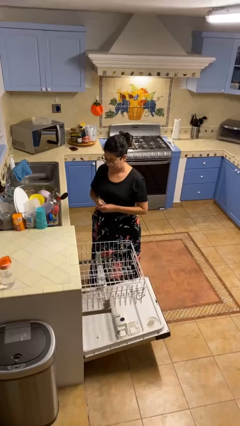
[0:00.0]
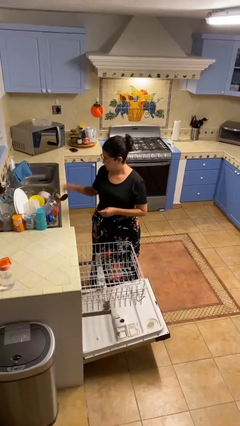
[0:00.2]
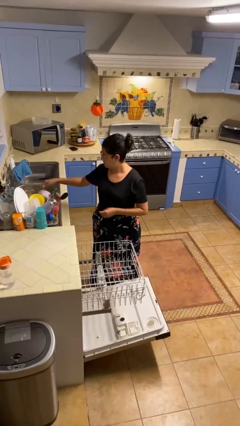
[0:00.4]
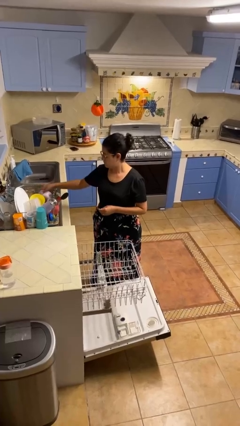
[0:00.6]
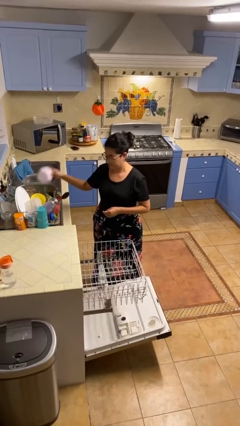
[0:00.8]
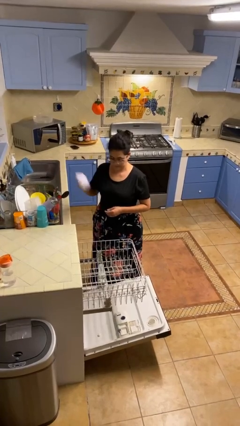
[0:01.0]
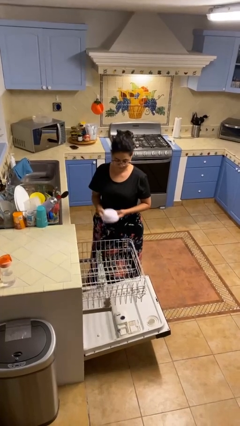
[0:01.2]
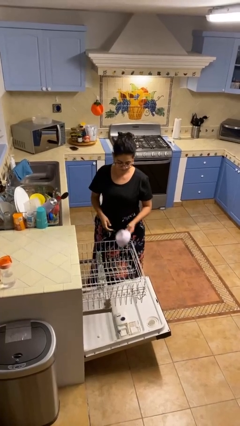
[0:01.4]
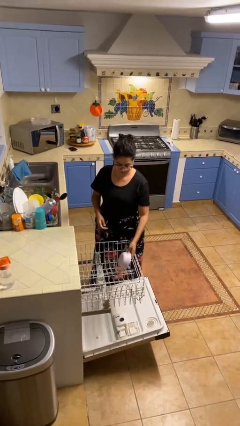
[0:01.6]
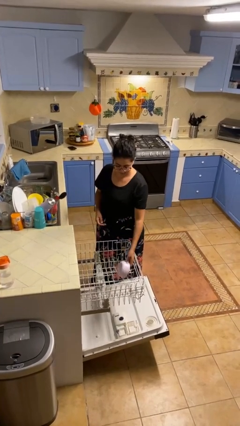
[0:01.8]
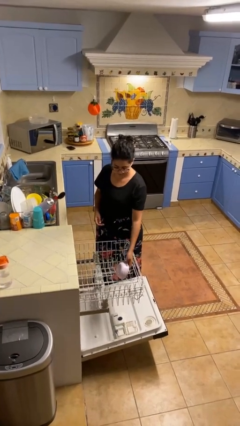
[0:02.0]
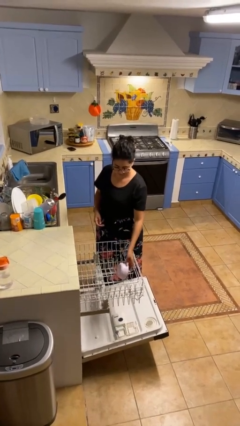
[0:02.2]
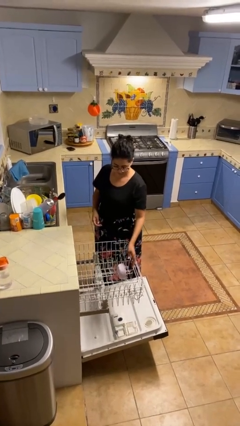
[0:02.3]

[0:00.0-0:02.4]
person loads dishwasher

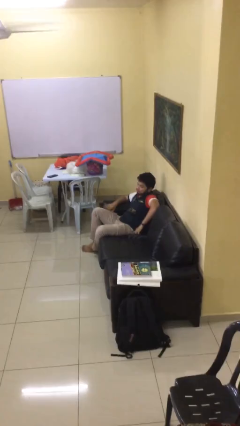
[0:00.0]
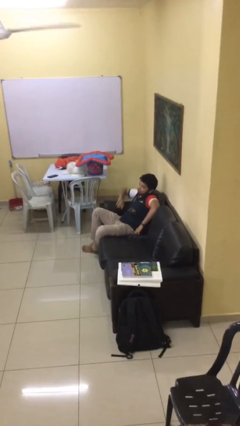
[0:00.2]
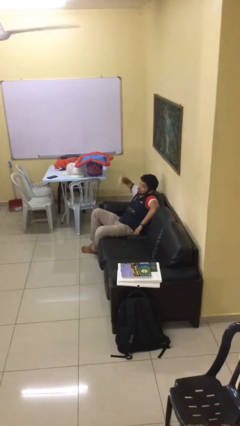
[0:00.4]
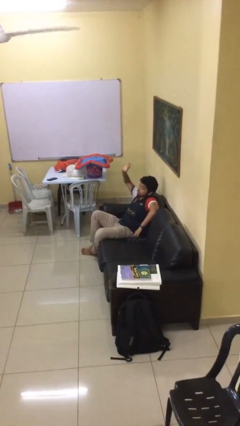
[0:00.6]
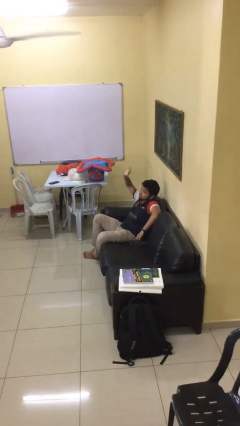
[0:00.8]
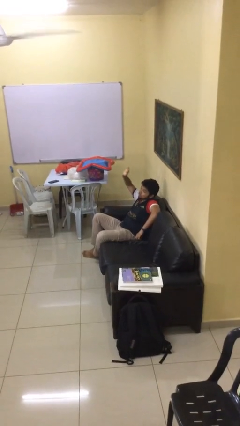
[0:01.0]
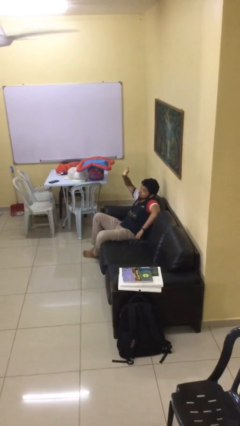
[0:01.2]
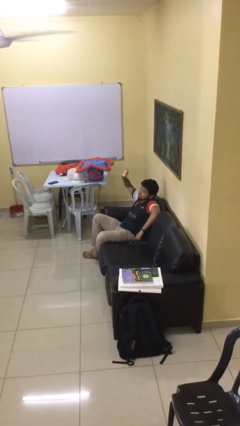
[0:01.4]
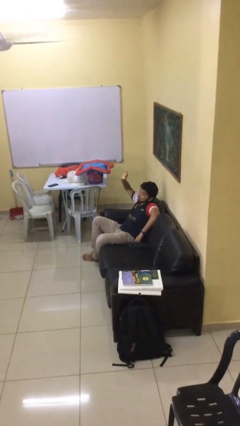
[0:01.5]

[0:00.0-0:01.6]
person gestures swipe up

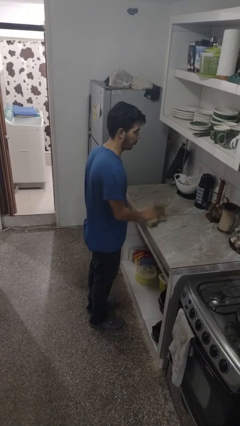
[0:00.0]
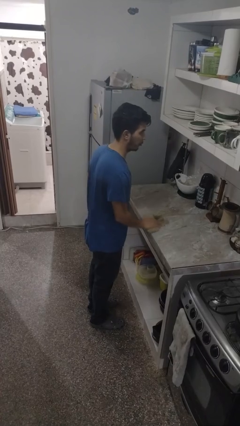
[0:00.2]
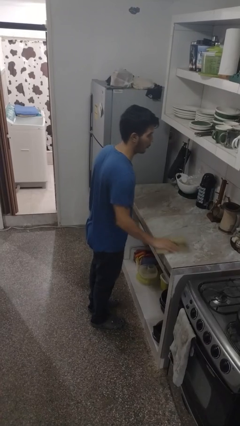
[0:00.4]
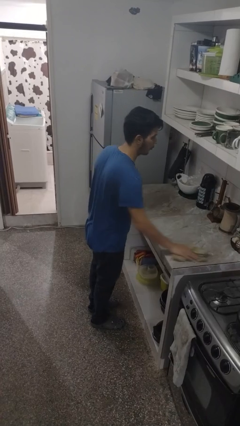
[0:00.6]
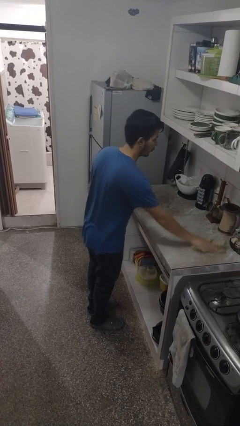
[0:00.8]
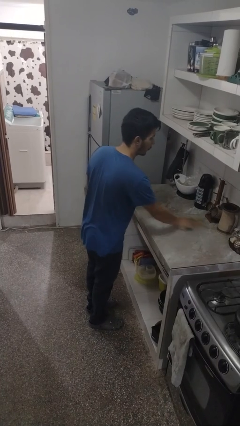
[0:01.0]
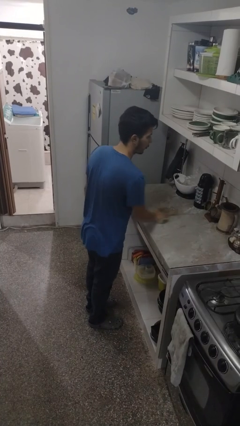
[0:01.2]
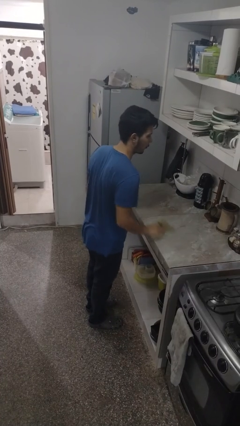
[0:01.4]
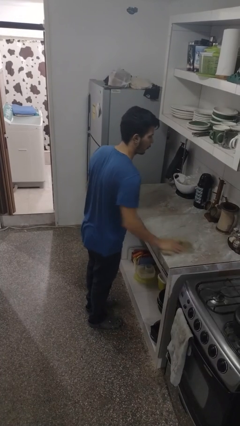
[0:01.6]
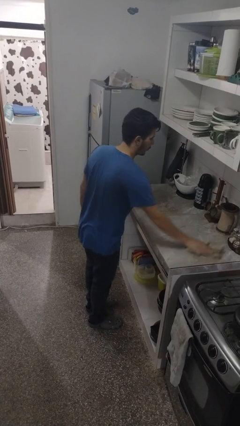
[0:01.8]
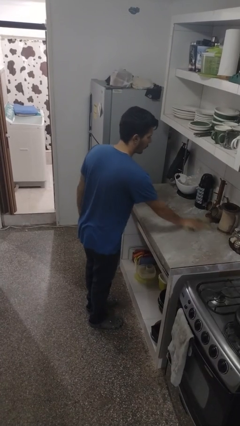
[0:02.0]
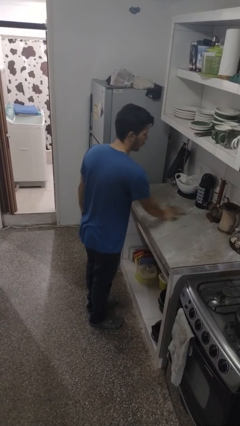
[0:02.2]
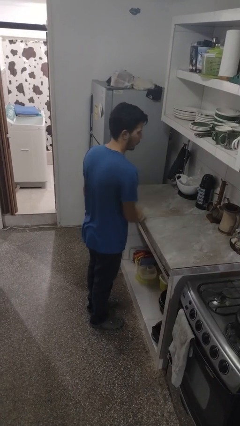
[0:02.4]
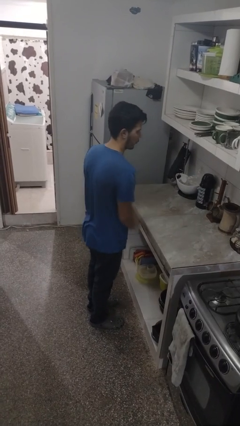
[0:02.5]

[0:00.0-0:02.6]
person cleans table with rag

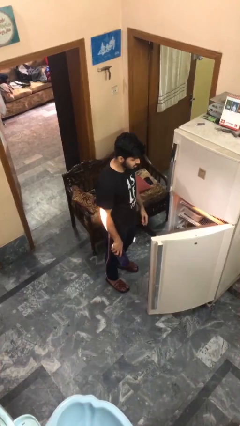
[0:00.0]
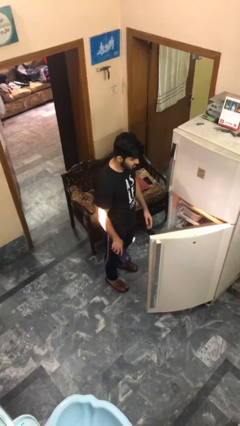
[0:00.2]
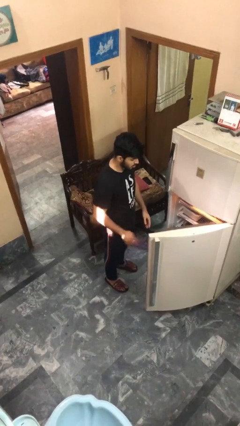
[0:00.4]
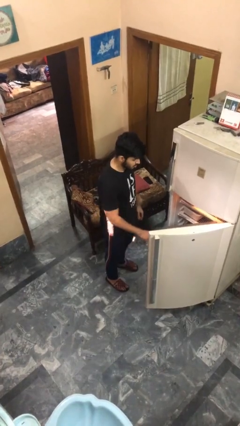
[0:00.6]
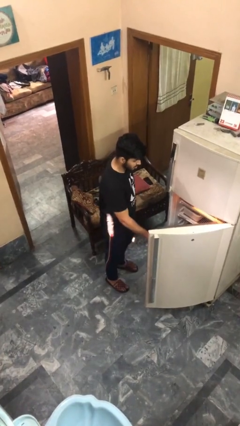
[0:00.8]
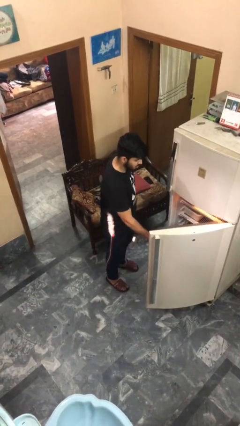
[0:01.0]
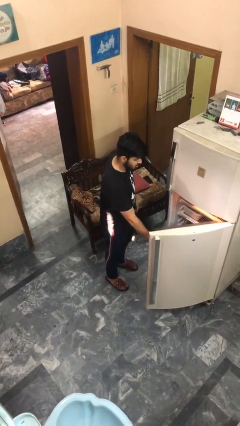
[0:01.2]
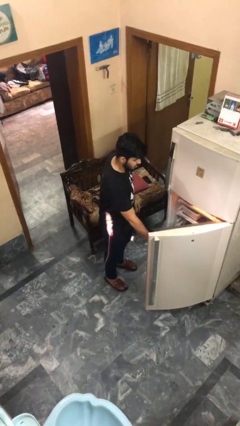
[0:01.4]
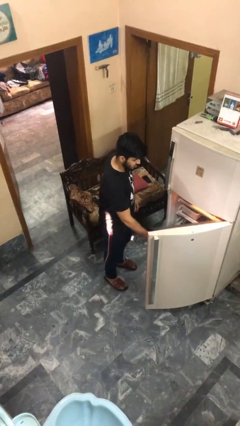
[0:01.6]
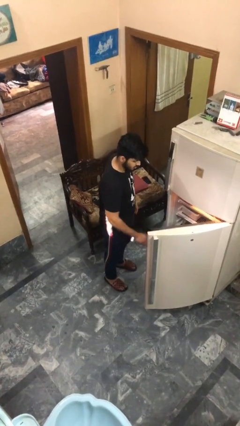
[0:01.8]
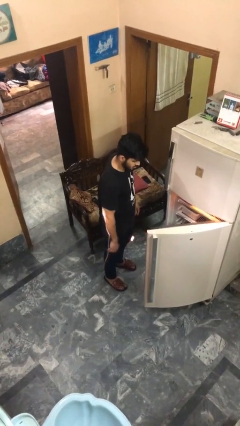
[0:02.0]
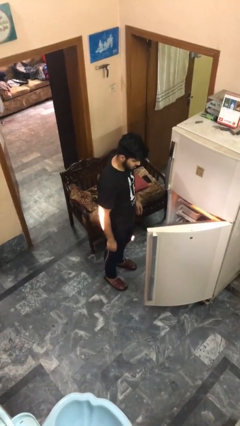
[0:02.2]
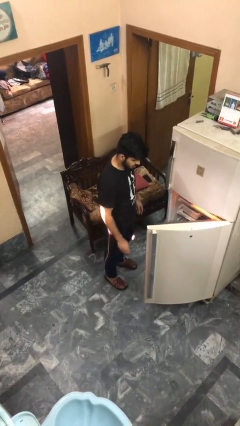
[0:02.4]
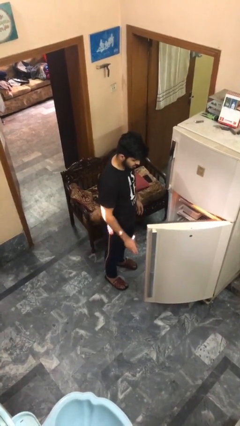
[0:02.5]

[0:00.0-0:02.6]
person puts object into refrigerator

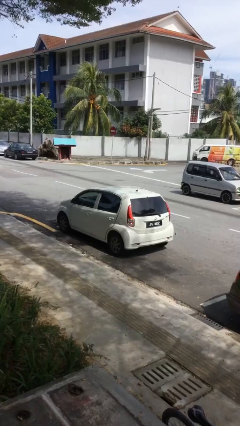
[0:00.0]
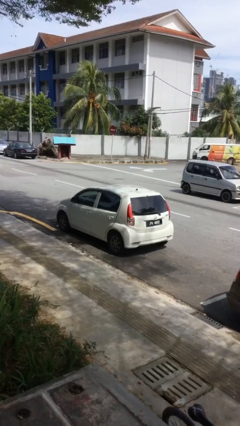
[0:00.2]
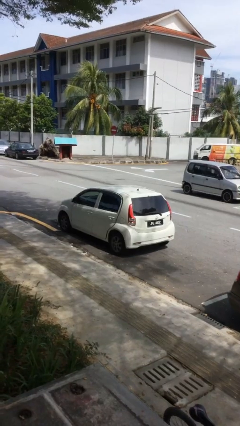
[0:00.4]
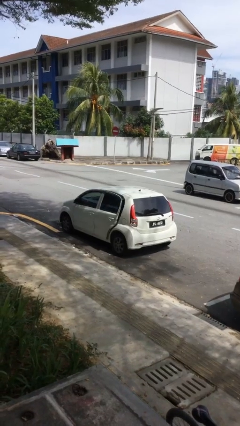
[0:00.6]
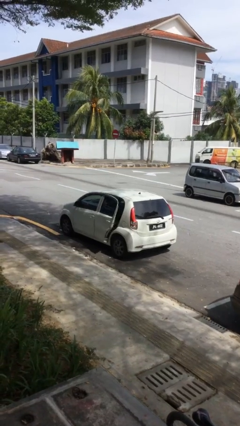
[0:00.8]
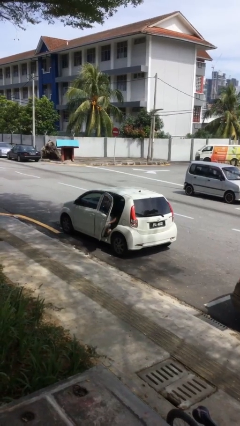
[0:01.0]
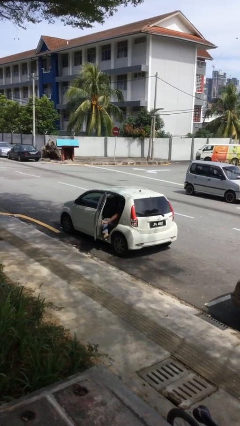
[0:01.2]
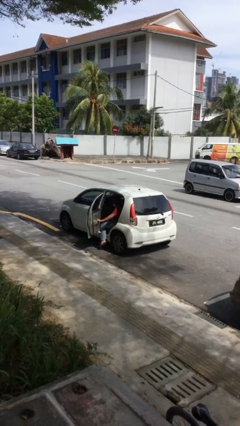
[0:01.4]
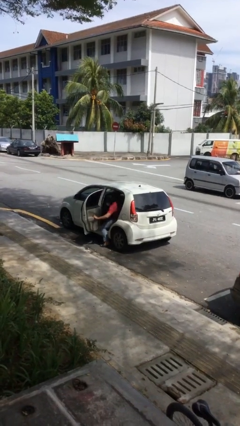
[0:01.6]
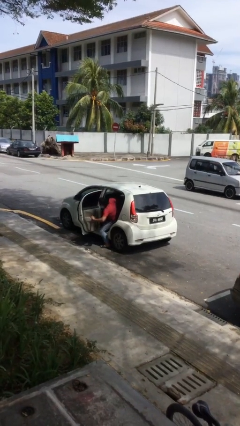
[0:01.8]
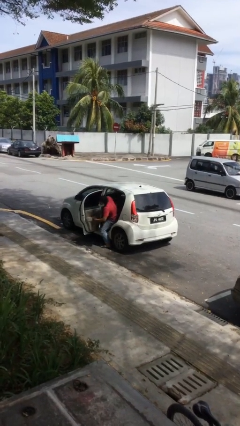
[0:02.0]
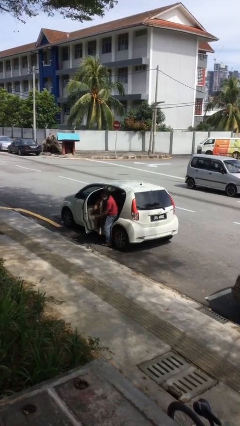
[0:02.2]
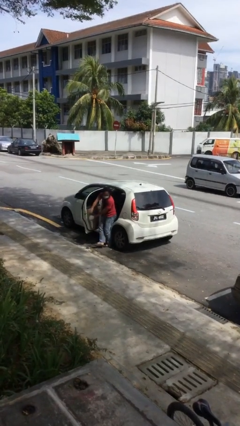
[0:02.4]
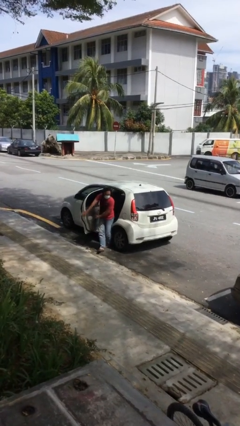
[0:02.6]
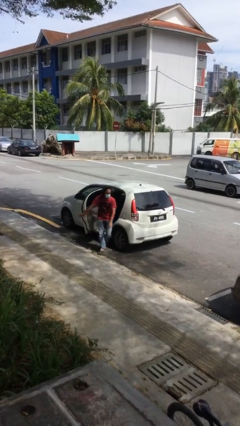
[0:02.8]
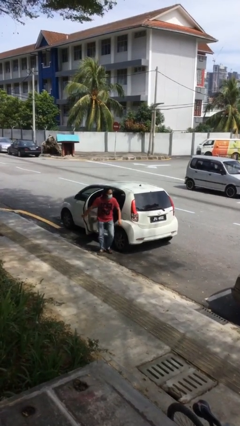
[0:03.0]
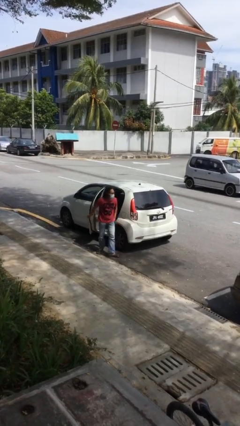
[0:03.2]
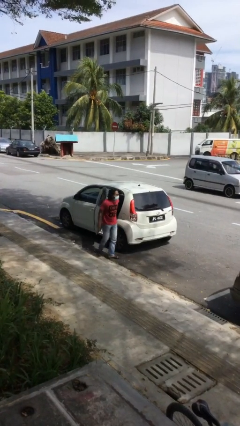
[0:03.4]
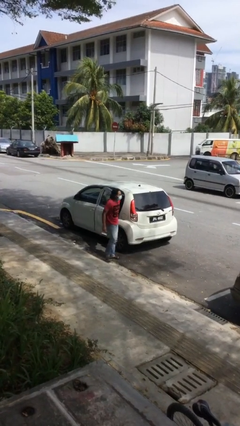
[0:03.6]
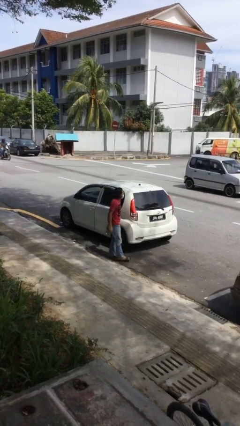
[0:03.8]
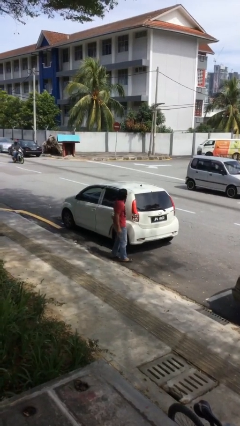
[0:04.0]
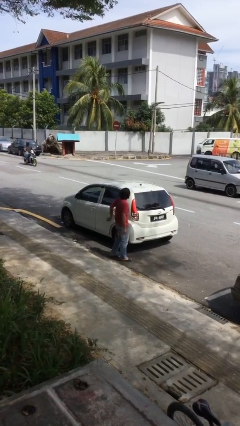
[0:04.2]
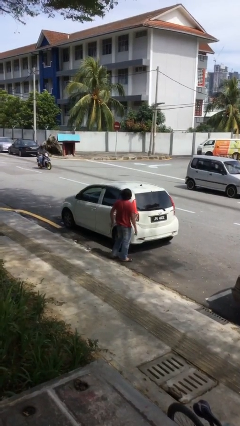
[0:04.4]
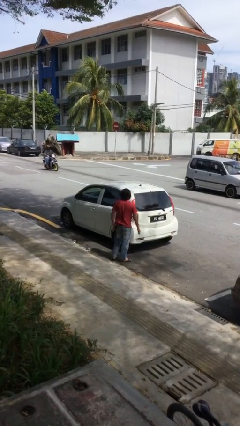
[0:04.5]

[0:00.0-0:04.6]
car drops off person

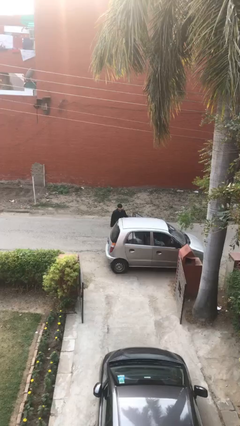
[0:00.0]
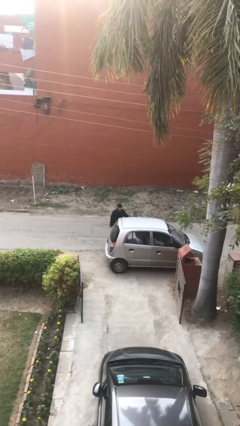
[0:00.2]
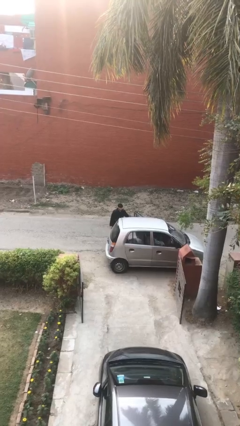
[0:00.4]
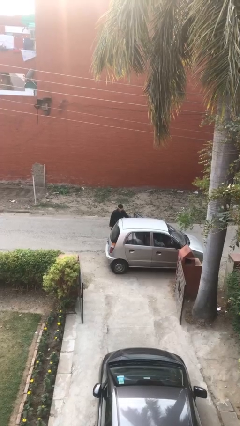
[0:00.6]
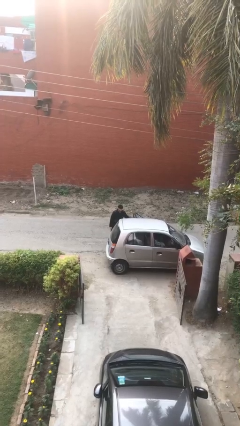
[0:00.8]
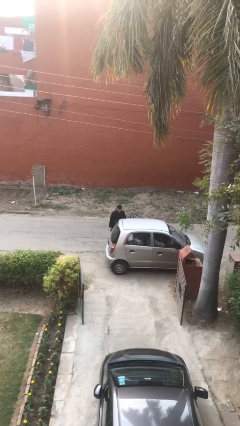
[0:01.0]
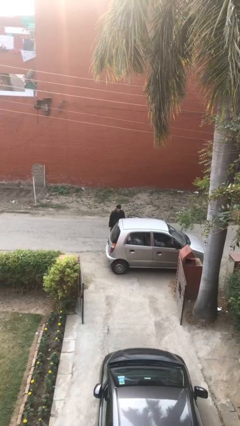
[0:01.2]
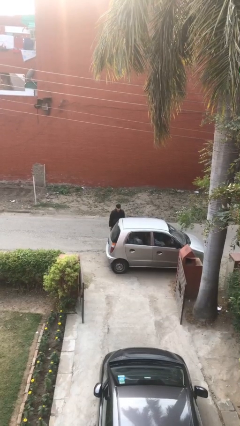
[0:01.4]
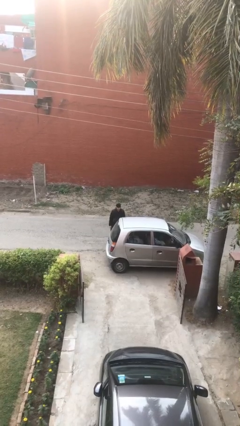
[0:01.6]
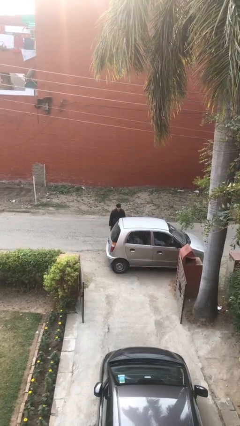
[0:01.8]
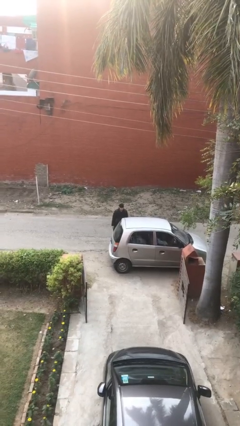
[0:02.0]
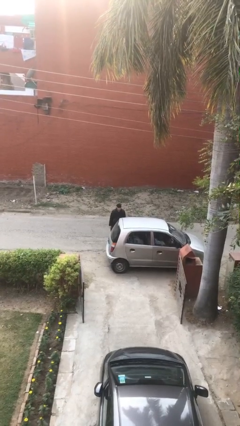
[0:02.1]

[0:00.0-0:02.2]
person closes car door

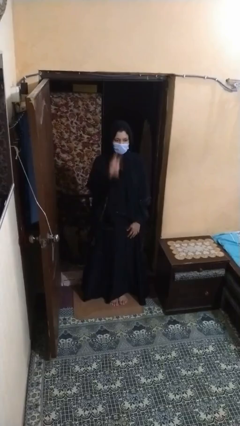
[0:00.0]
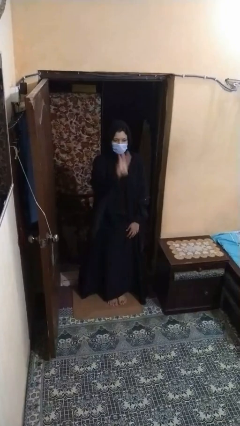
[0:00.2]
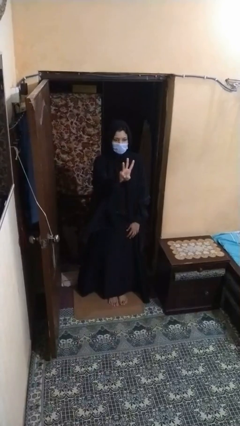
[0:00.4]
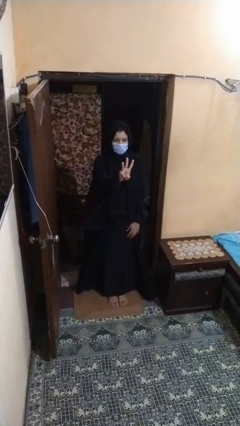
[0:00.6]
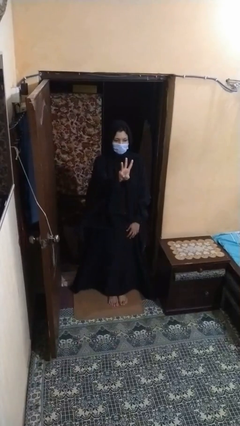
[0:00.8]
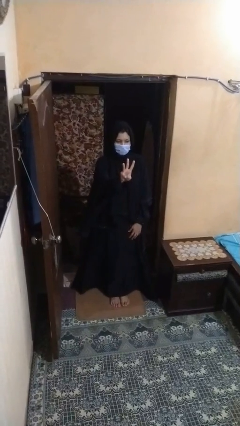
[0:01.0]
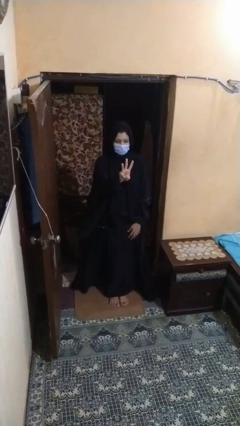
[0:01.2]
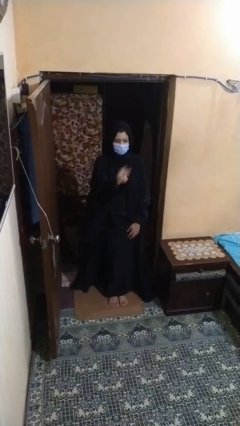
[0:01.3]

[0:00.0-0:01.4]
person gestures number three
